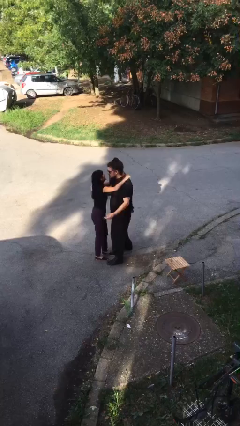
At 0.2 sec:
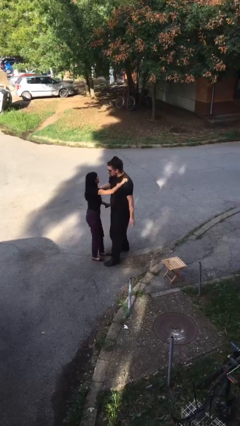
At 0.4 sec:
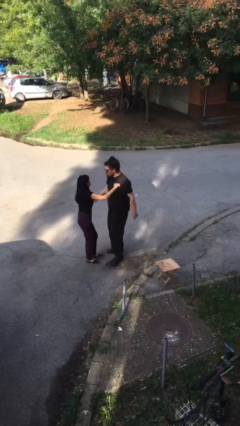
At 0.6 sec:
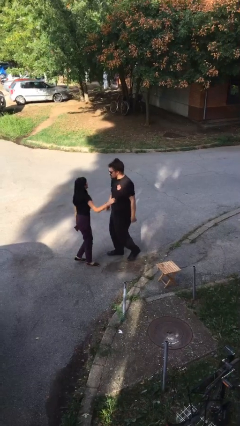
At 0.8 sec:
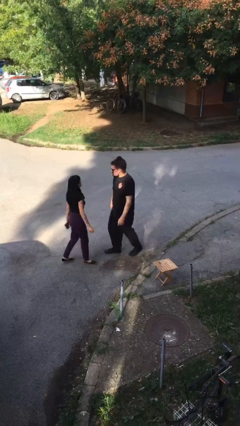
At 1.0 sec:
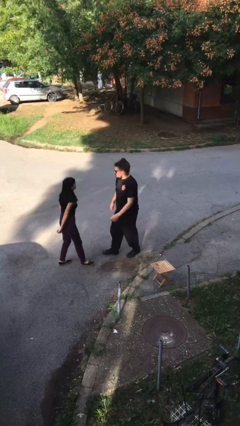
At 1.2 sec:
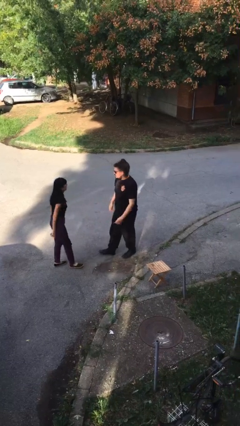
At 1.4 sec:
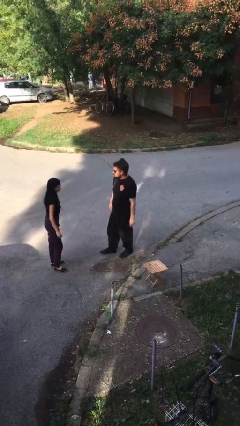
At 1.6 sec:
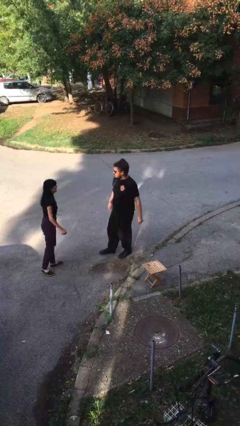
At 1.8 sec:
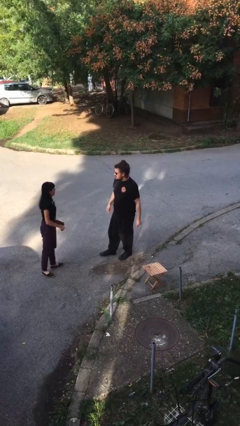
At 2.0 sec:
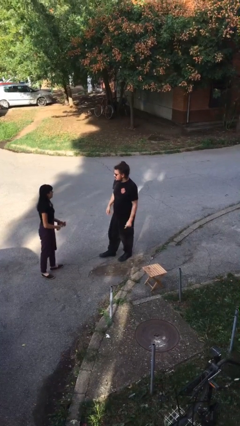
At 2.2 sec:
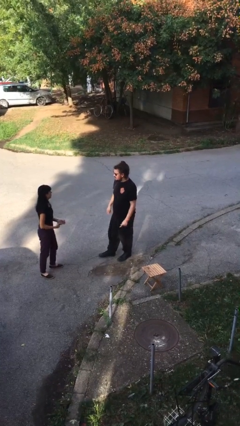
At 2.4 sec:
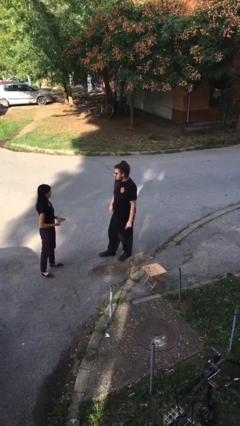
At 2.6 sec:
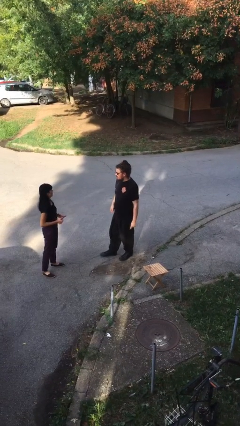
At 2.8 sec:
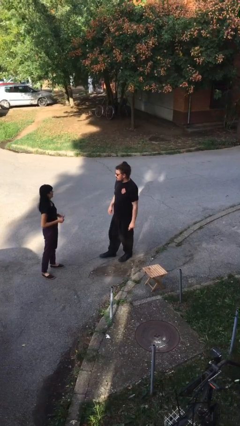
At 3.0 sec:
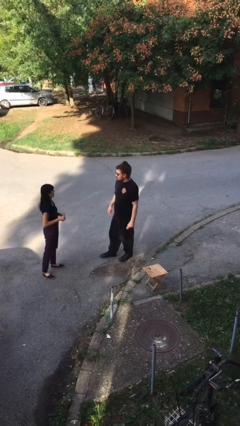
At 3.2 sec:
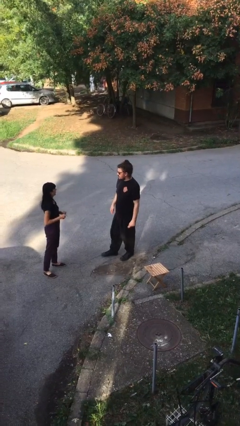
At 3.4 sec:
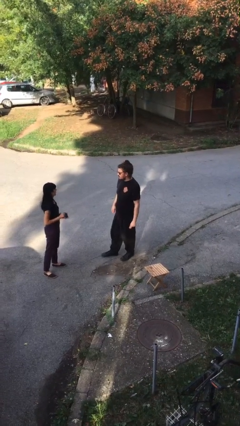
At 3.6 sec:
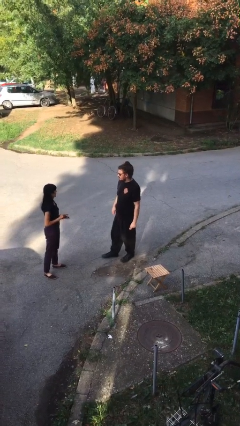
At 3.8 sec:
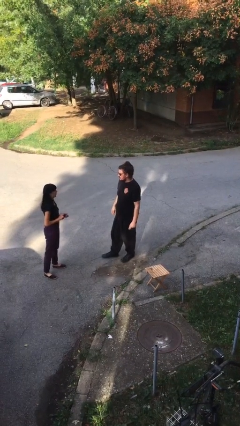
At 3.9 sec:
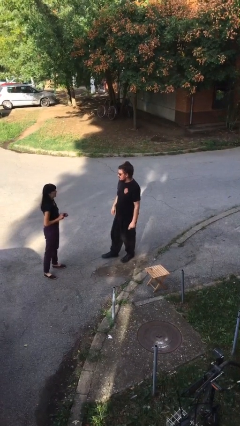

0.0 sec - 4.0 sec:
person talks to person

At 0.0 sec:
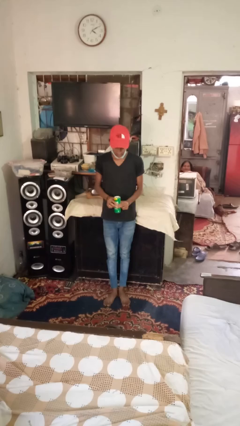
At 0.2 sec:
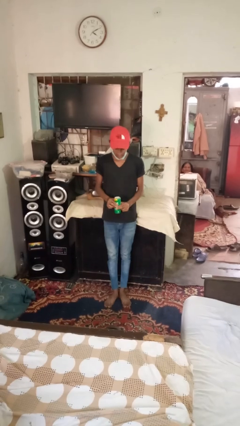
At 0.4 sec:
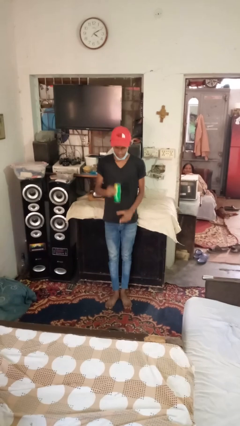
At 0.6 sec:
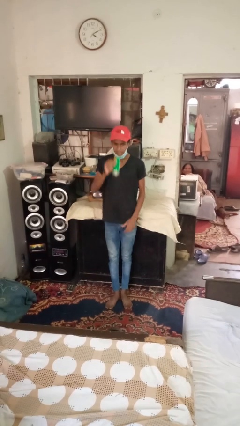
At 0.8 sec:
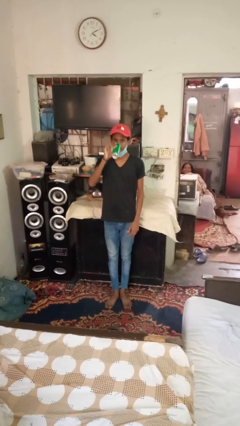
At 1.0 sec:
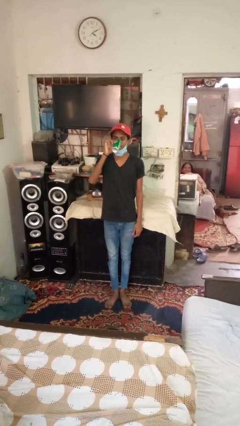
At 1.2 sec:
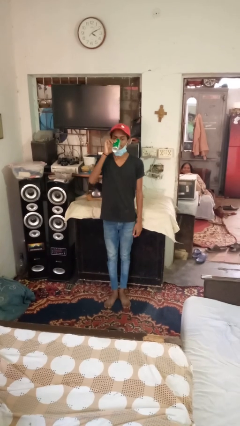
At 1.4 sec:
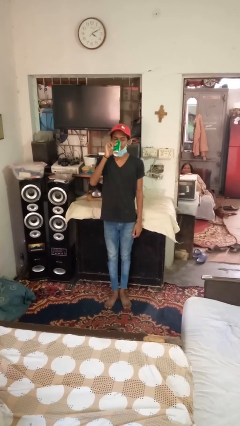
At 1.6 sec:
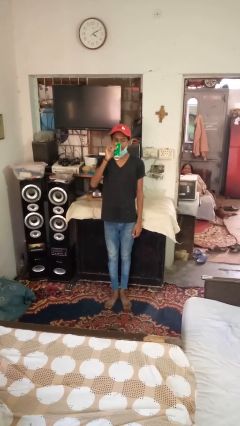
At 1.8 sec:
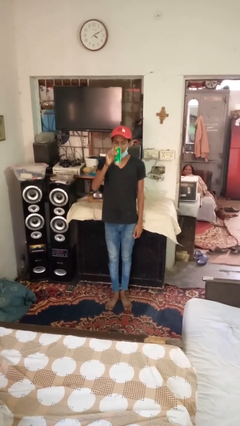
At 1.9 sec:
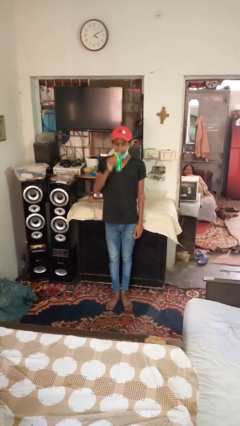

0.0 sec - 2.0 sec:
person drinks from beverage can

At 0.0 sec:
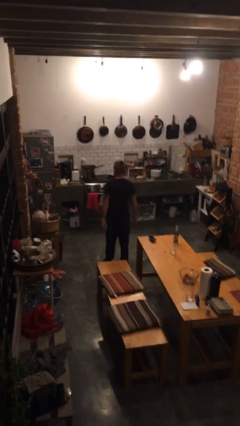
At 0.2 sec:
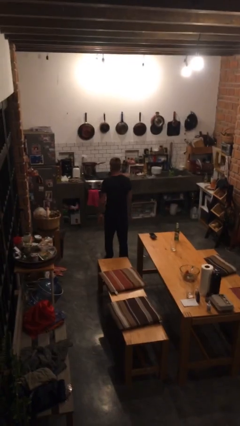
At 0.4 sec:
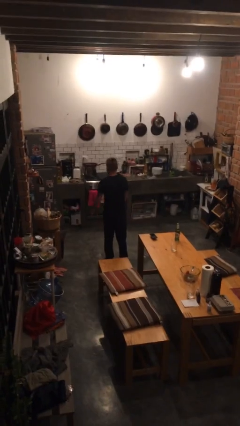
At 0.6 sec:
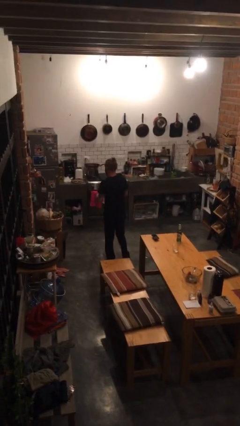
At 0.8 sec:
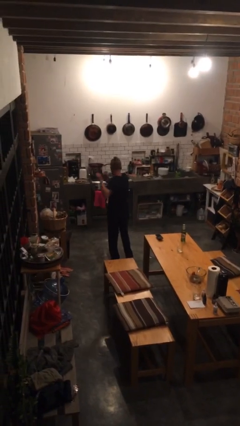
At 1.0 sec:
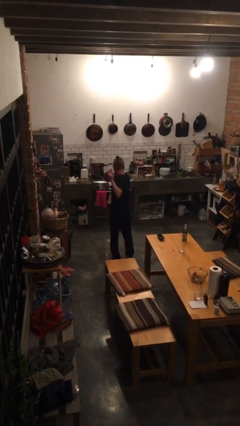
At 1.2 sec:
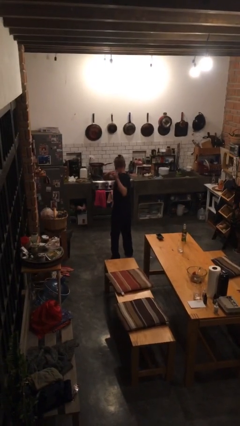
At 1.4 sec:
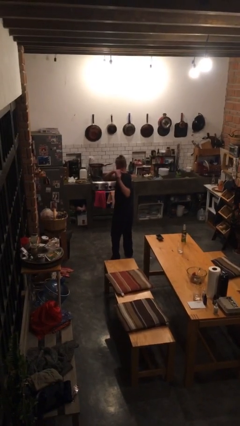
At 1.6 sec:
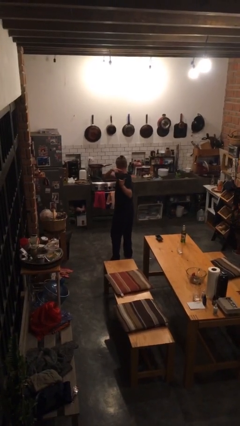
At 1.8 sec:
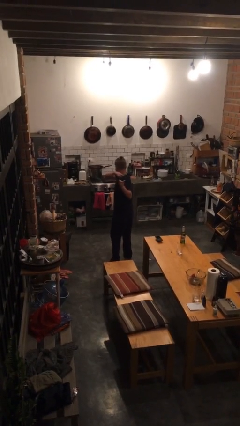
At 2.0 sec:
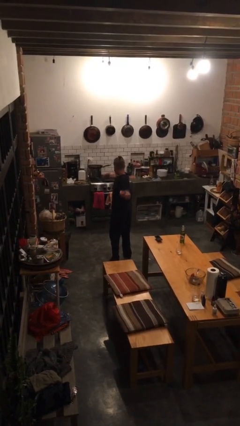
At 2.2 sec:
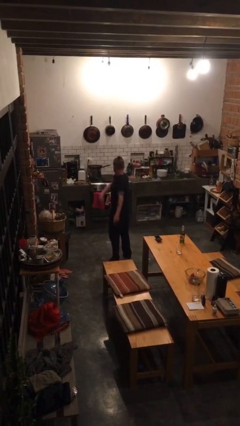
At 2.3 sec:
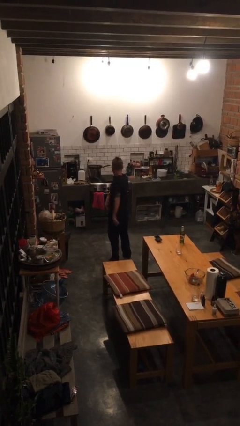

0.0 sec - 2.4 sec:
person gestures behind me

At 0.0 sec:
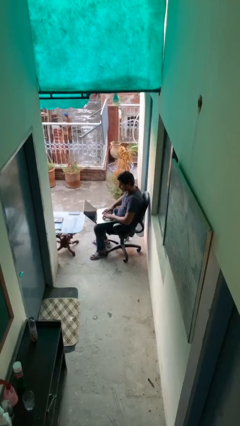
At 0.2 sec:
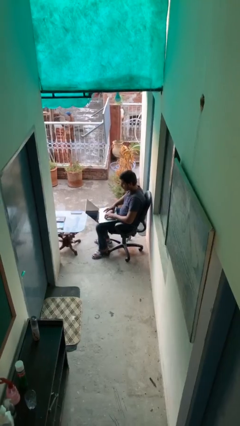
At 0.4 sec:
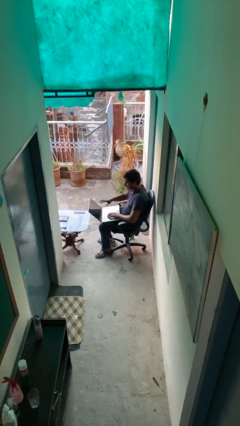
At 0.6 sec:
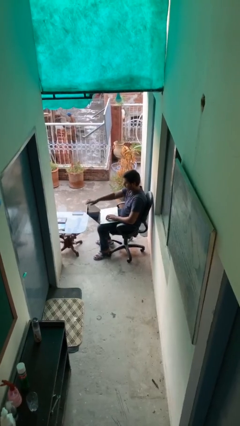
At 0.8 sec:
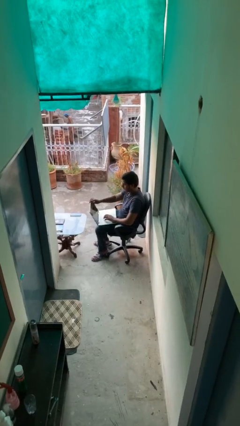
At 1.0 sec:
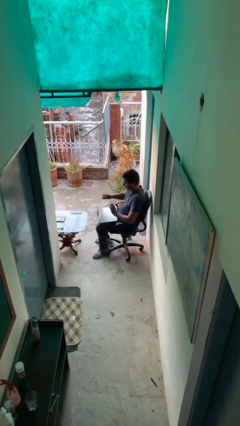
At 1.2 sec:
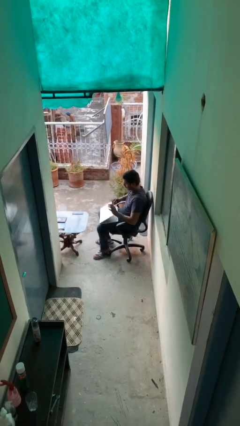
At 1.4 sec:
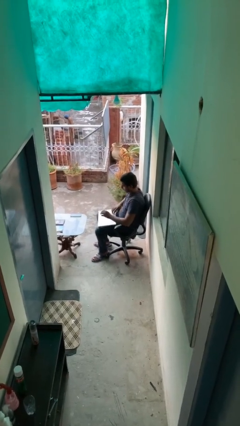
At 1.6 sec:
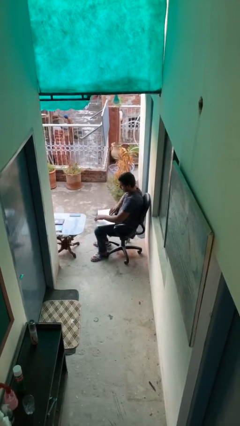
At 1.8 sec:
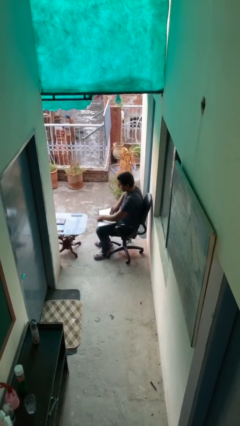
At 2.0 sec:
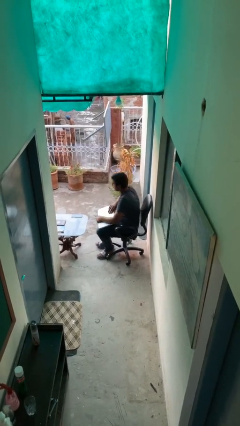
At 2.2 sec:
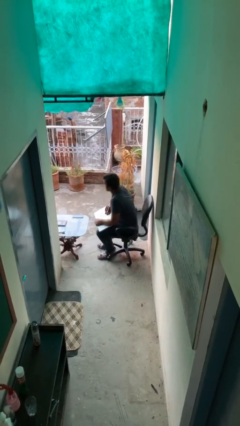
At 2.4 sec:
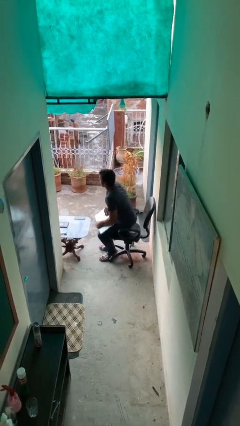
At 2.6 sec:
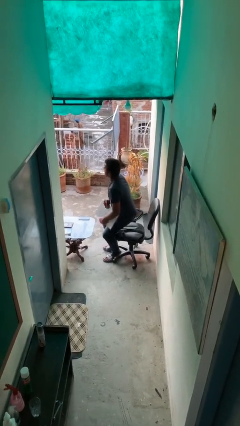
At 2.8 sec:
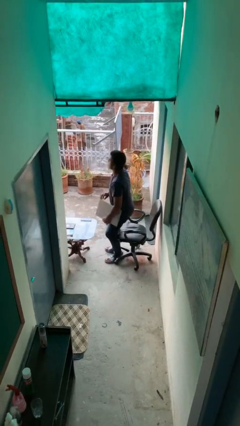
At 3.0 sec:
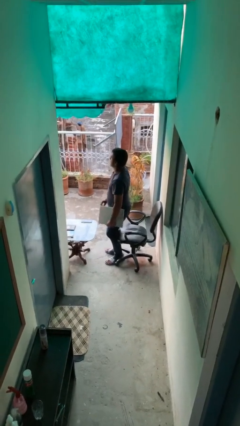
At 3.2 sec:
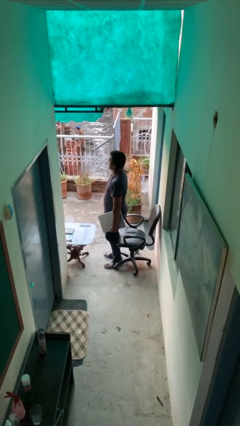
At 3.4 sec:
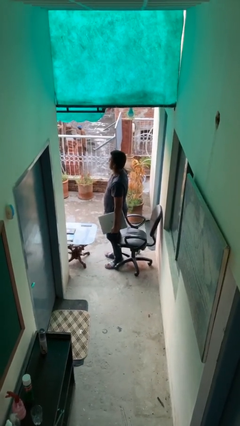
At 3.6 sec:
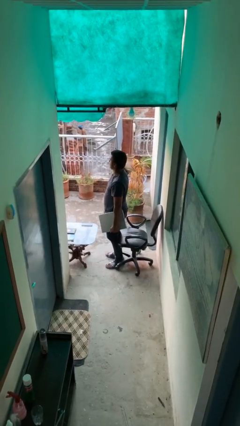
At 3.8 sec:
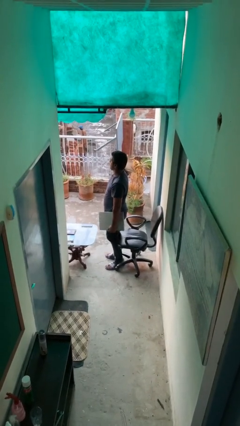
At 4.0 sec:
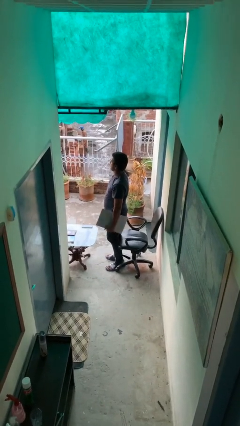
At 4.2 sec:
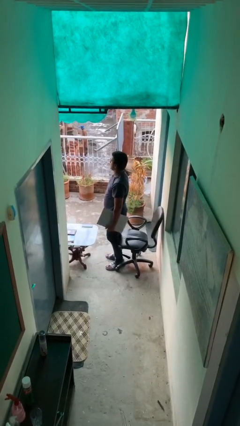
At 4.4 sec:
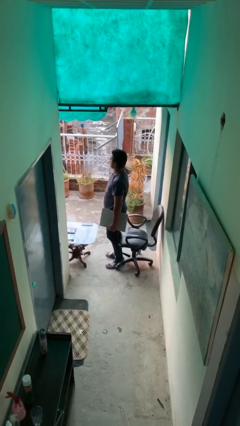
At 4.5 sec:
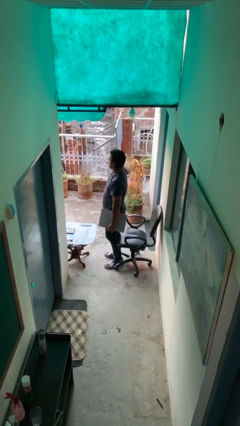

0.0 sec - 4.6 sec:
person stands up

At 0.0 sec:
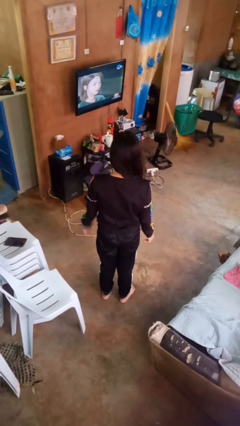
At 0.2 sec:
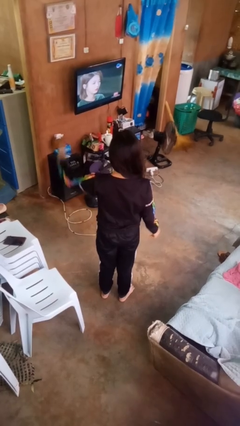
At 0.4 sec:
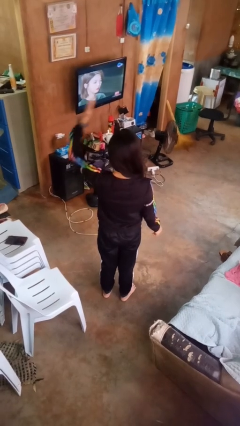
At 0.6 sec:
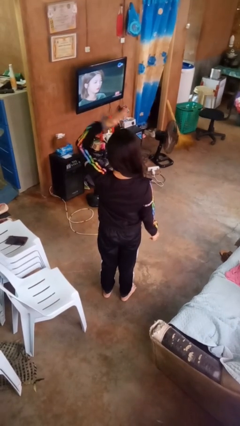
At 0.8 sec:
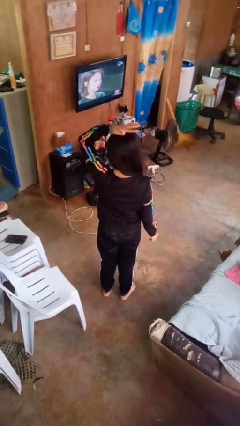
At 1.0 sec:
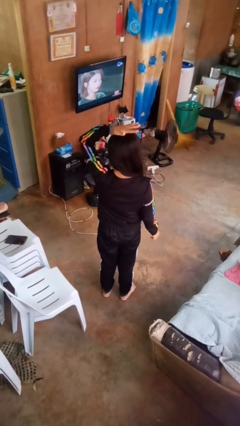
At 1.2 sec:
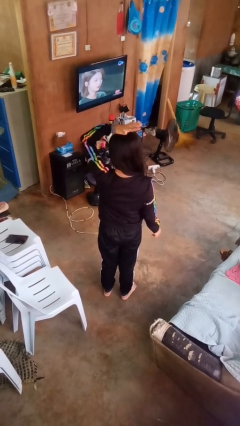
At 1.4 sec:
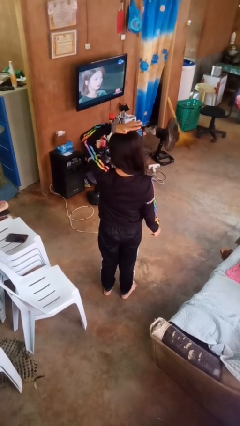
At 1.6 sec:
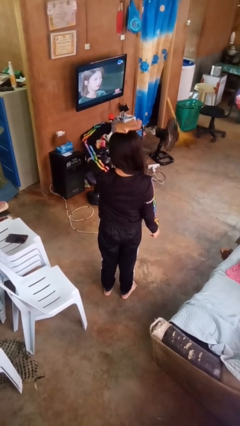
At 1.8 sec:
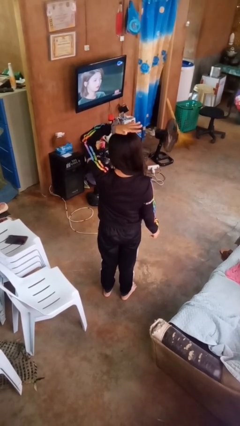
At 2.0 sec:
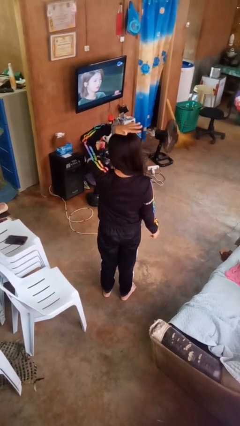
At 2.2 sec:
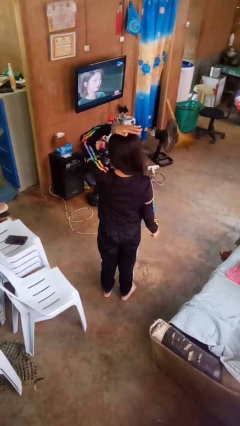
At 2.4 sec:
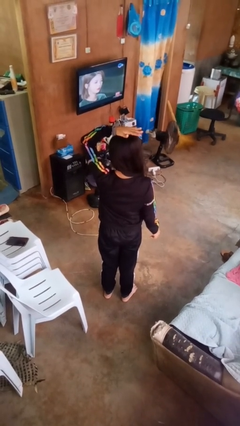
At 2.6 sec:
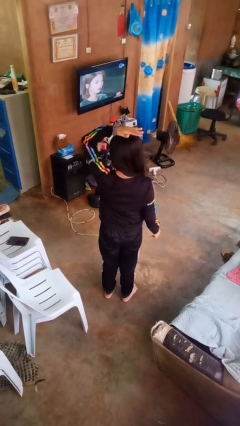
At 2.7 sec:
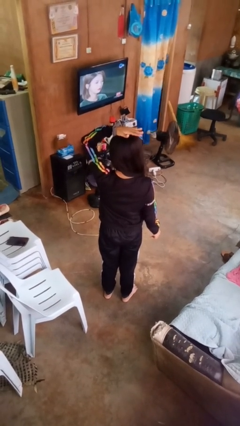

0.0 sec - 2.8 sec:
person pats head

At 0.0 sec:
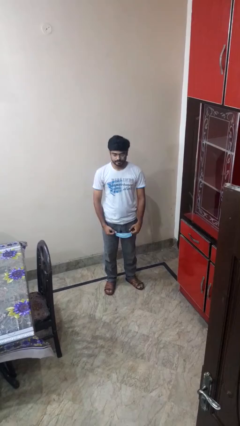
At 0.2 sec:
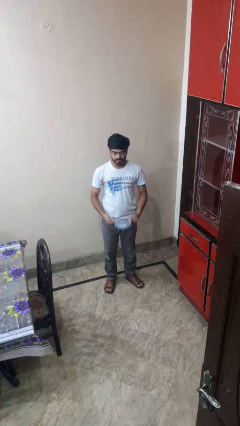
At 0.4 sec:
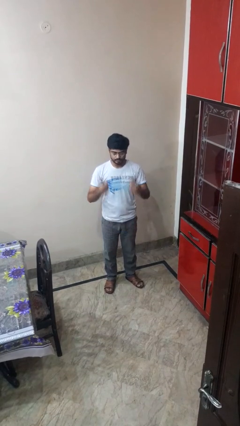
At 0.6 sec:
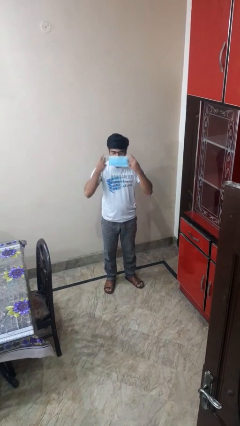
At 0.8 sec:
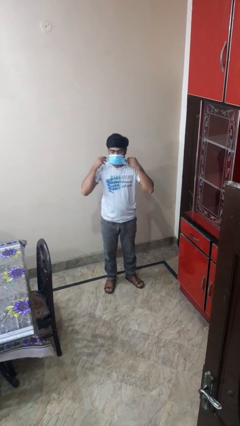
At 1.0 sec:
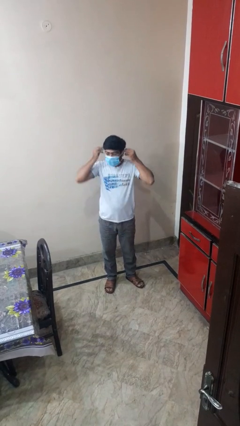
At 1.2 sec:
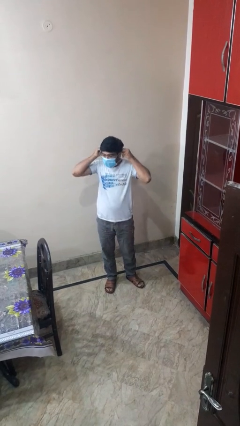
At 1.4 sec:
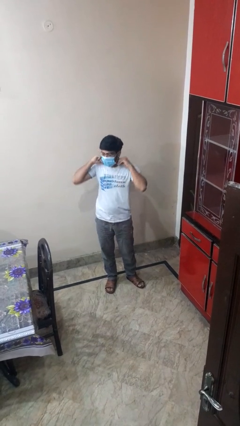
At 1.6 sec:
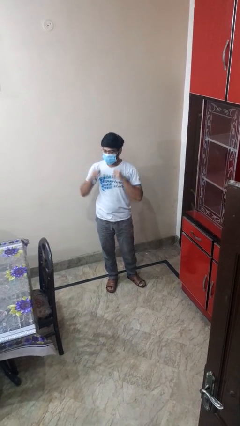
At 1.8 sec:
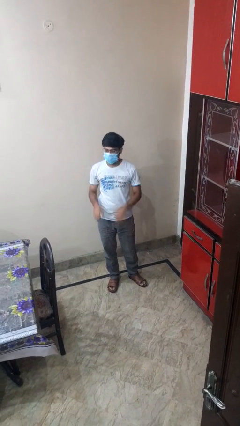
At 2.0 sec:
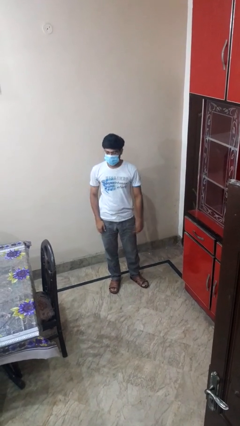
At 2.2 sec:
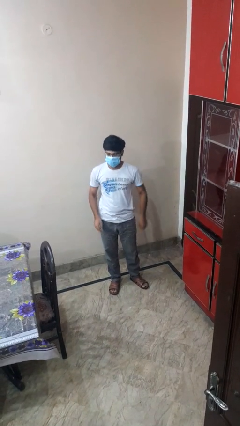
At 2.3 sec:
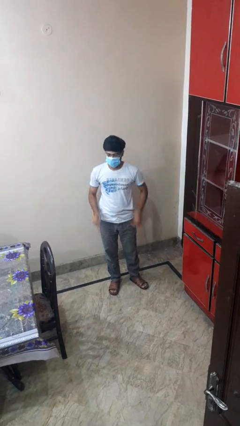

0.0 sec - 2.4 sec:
person puts on facemask
